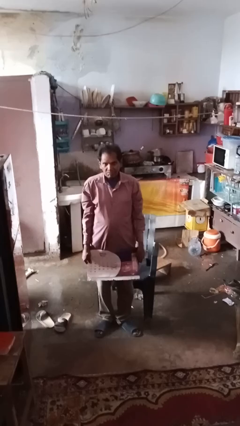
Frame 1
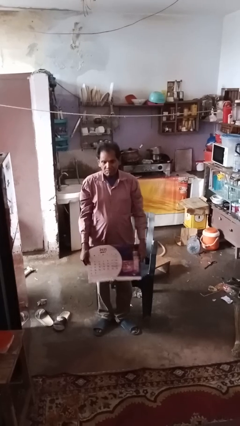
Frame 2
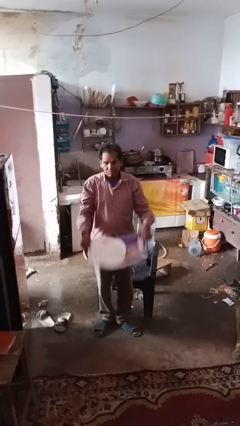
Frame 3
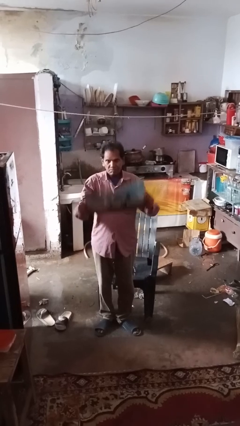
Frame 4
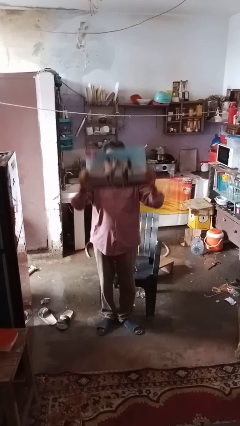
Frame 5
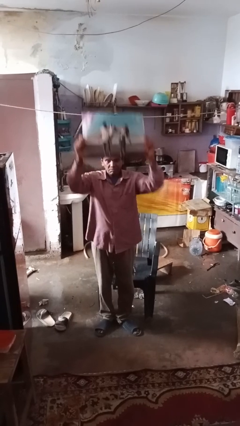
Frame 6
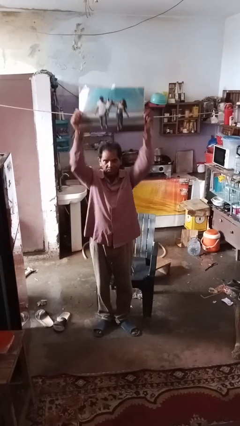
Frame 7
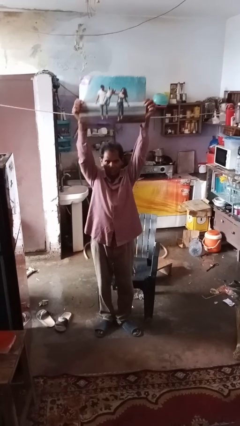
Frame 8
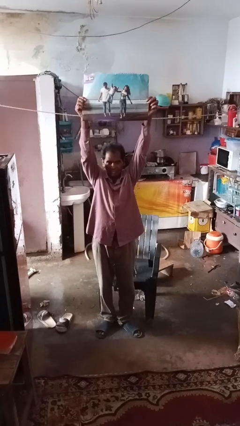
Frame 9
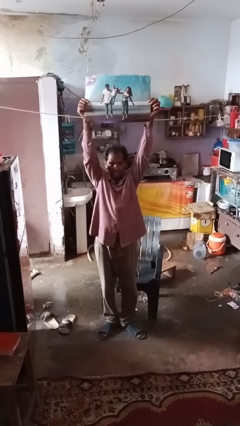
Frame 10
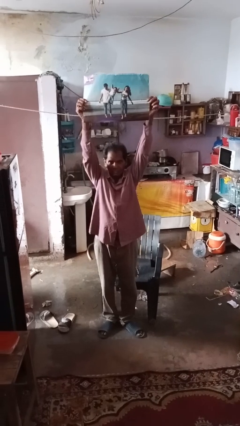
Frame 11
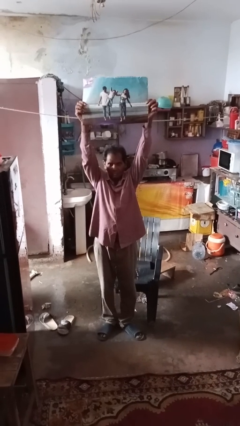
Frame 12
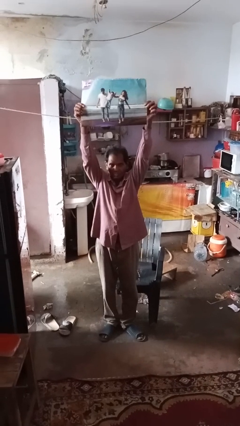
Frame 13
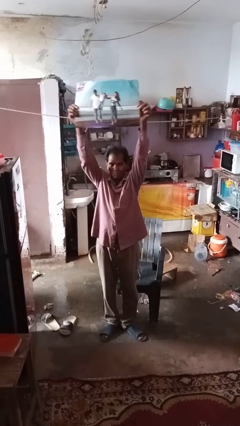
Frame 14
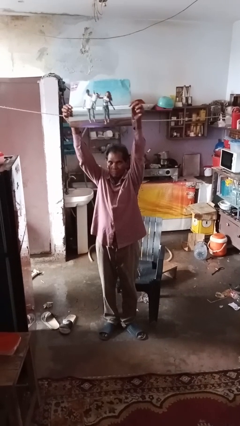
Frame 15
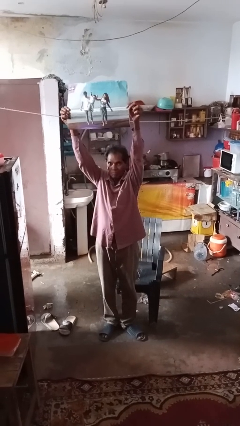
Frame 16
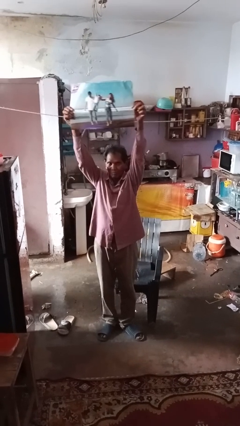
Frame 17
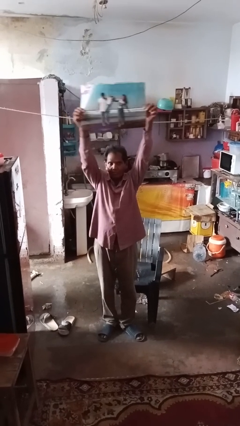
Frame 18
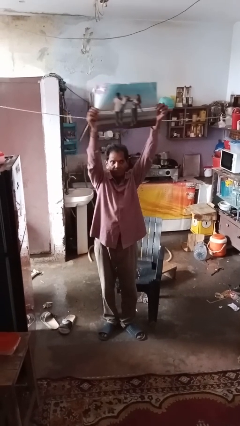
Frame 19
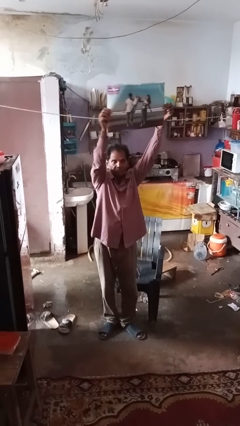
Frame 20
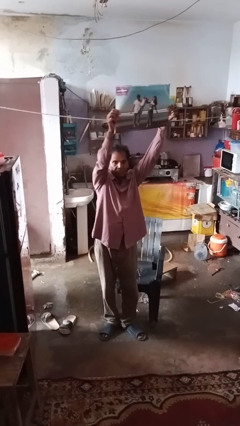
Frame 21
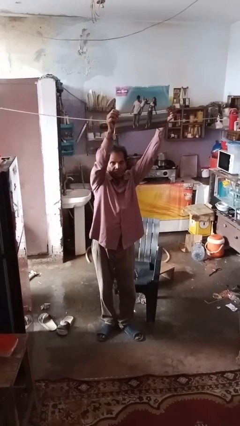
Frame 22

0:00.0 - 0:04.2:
person holds object above head

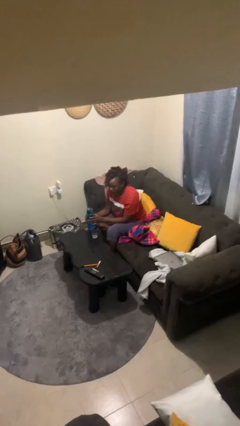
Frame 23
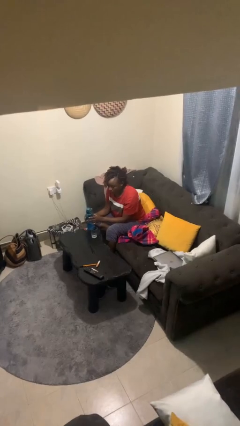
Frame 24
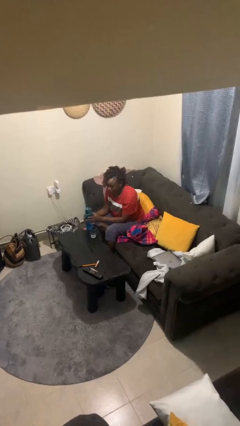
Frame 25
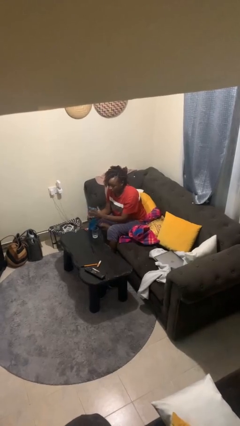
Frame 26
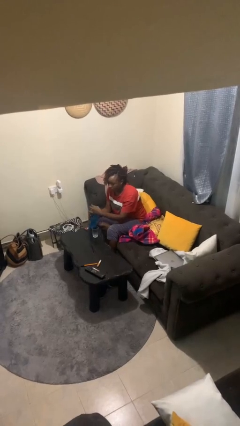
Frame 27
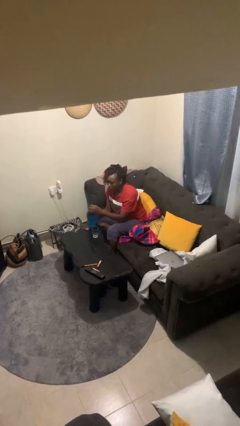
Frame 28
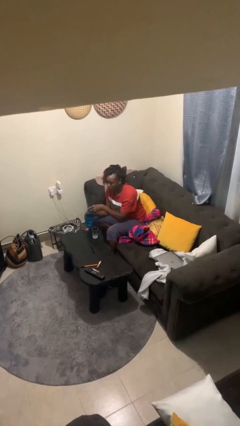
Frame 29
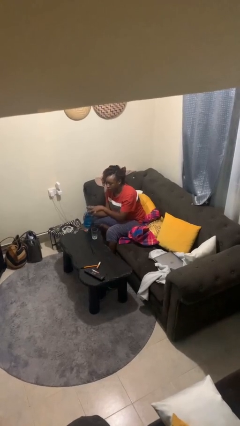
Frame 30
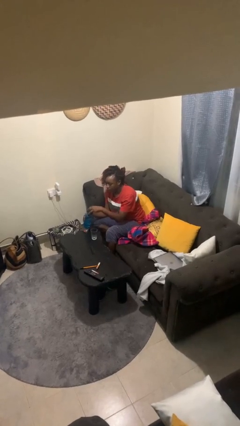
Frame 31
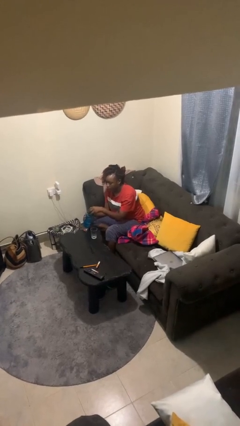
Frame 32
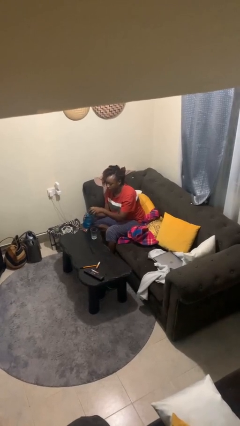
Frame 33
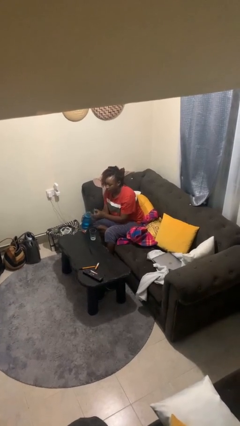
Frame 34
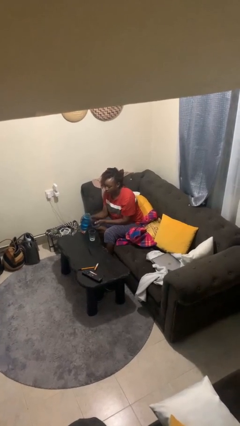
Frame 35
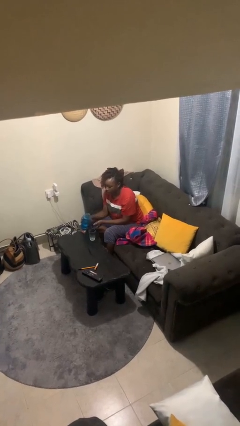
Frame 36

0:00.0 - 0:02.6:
person unscrews lid from bottle

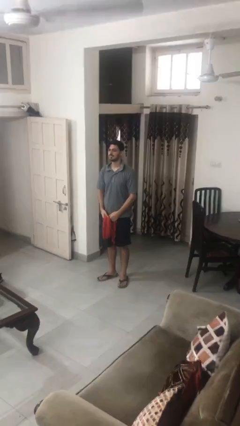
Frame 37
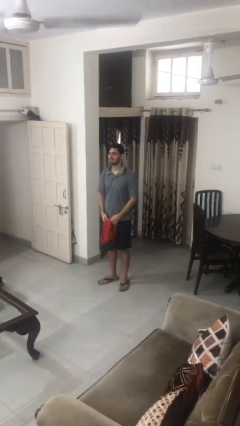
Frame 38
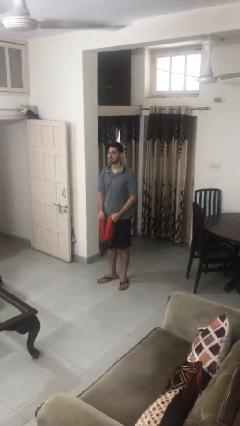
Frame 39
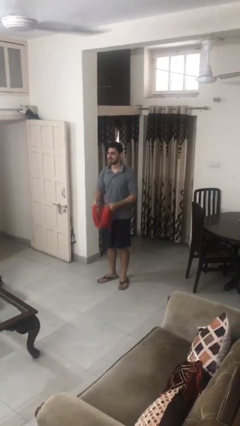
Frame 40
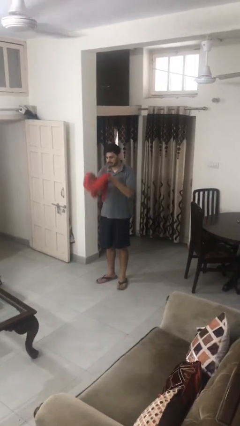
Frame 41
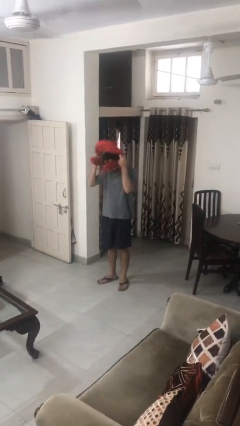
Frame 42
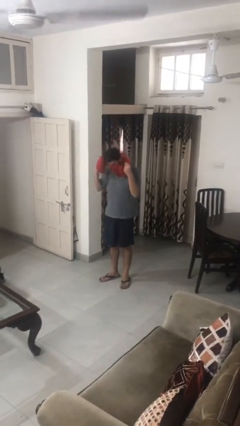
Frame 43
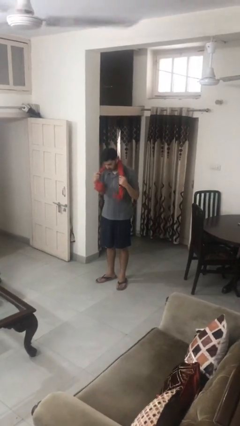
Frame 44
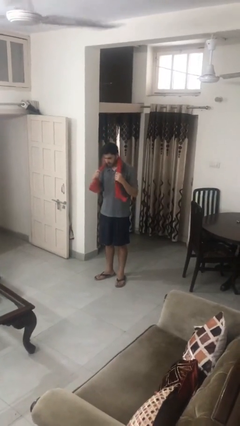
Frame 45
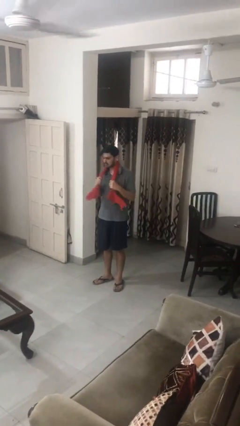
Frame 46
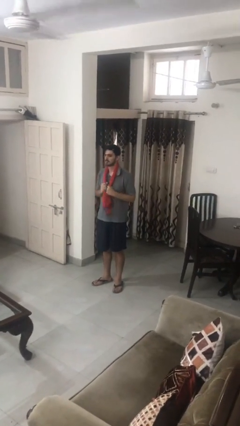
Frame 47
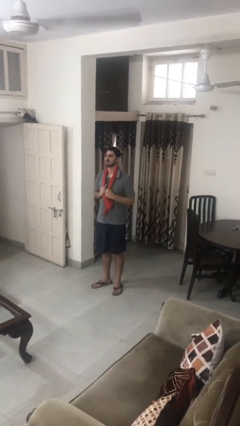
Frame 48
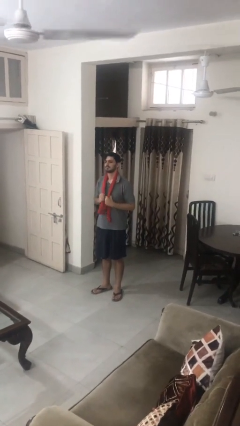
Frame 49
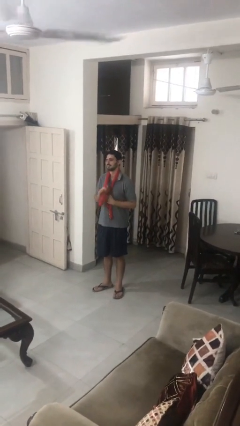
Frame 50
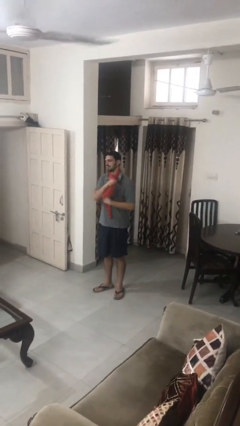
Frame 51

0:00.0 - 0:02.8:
person puts on scarf

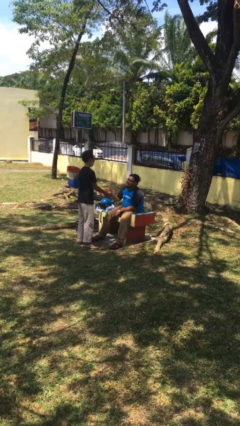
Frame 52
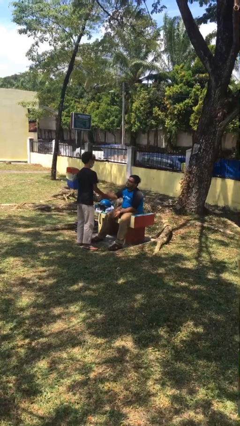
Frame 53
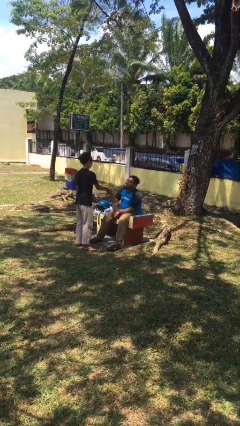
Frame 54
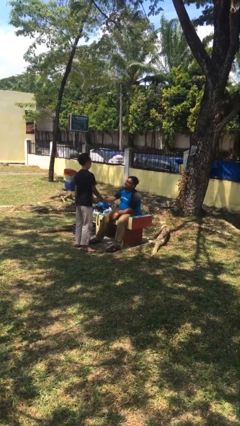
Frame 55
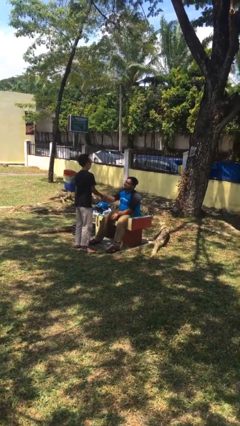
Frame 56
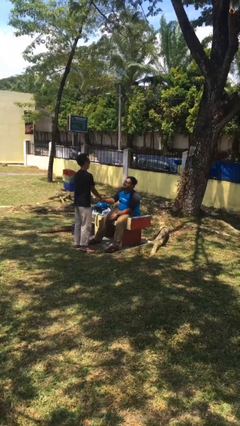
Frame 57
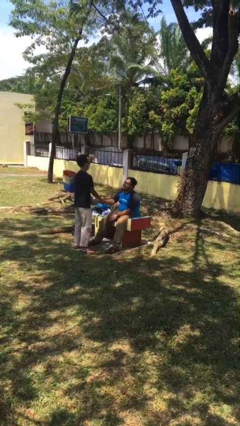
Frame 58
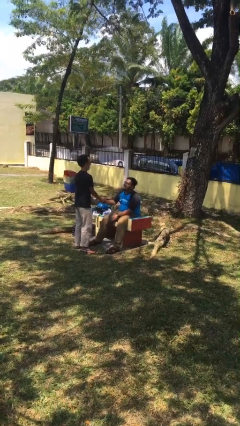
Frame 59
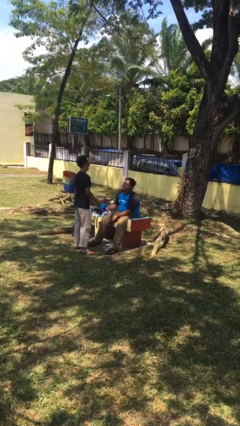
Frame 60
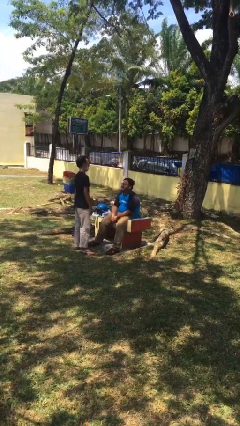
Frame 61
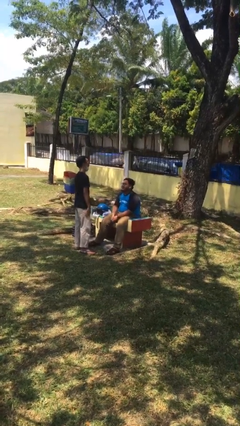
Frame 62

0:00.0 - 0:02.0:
person shakes hand

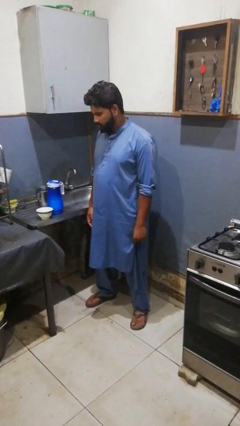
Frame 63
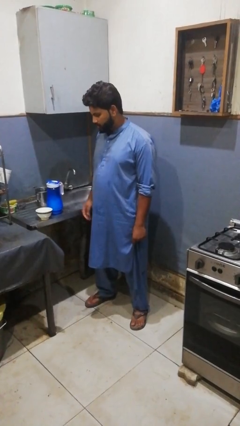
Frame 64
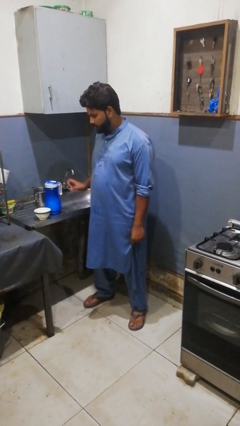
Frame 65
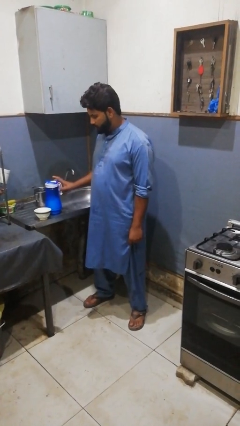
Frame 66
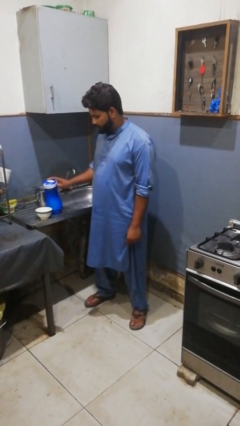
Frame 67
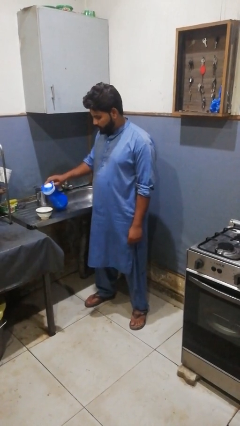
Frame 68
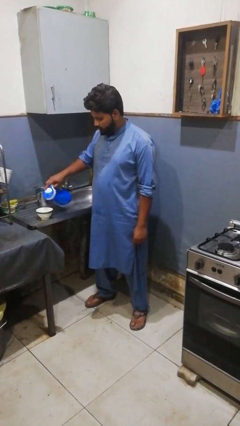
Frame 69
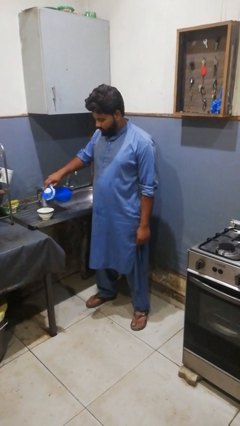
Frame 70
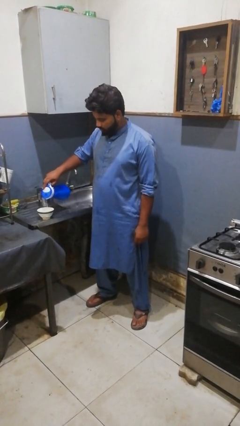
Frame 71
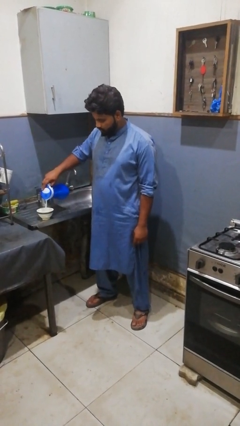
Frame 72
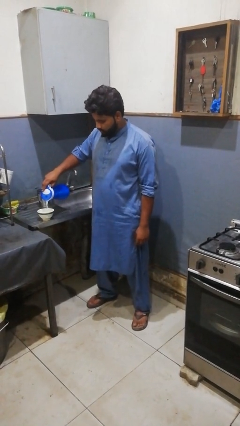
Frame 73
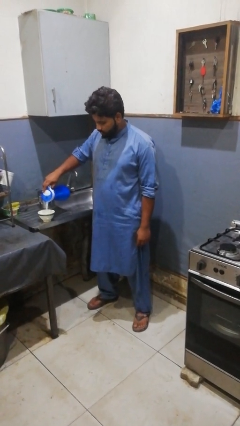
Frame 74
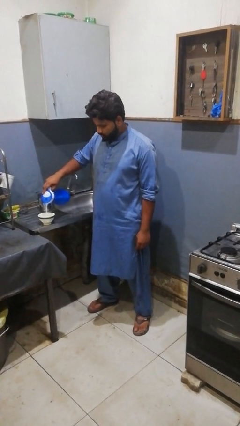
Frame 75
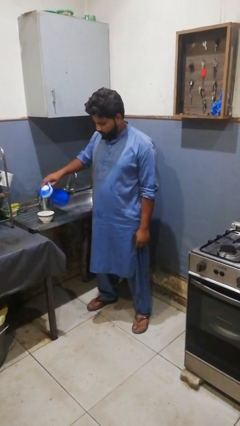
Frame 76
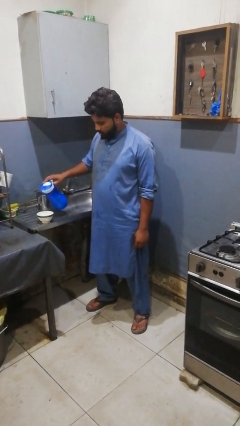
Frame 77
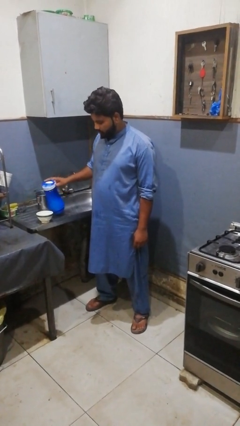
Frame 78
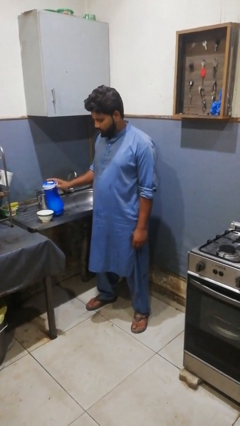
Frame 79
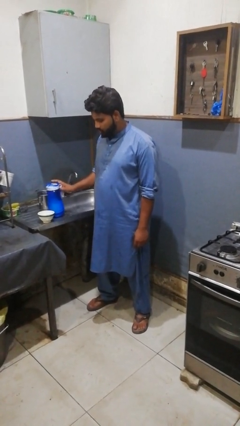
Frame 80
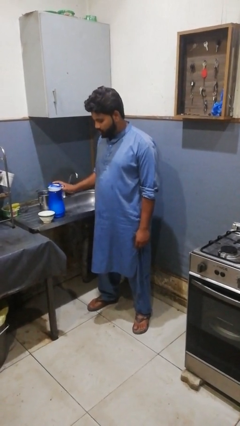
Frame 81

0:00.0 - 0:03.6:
person pours into bowl

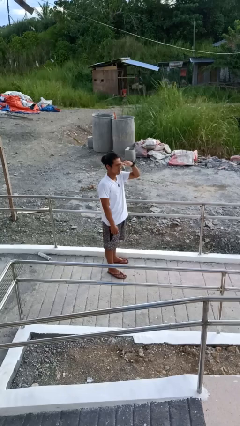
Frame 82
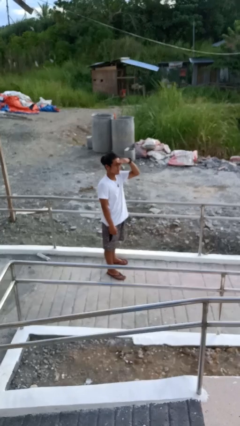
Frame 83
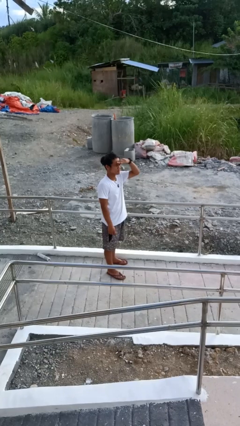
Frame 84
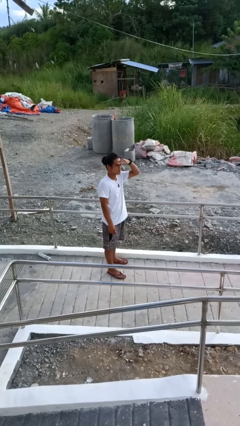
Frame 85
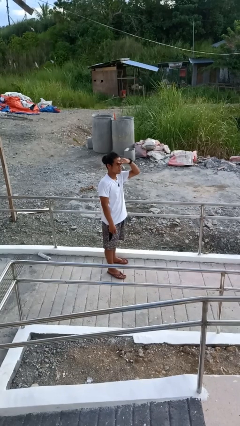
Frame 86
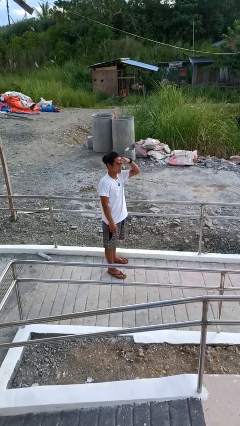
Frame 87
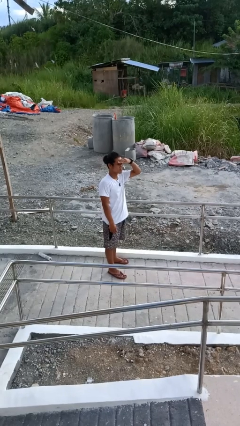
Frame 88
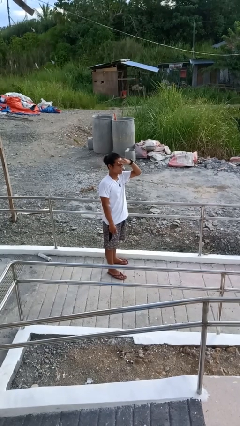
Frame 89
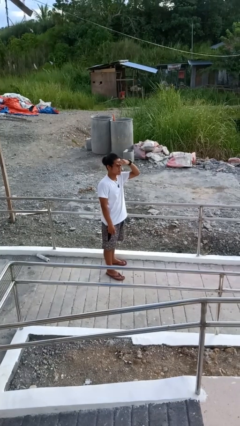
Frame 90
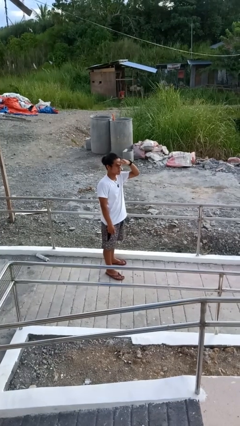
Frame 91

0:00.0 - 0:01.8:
person shades eyes
